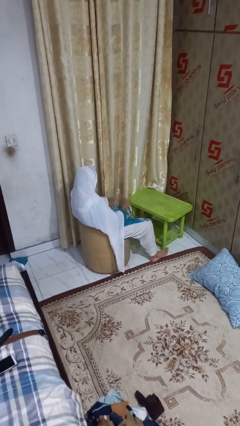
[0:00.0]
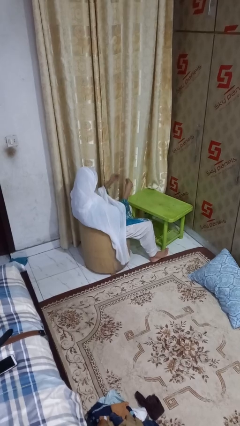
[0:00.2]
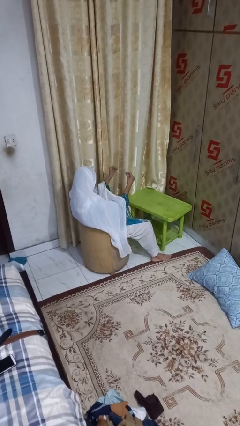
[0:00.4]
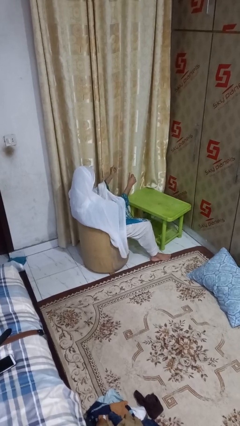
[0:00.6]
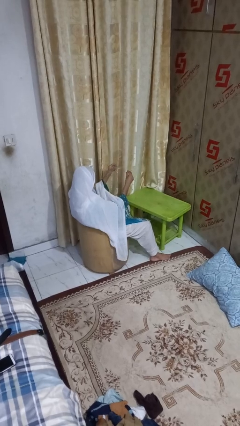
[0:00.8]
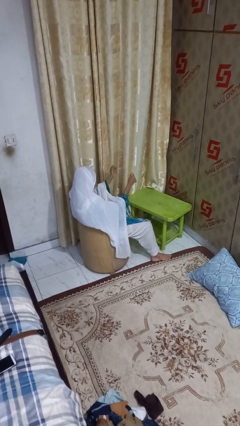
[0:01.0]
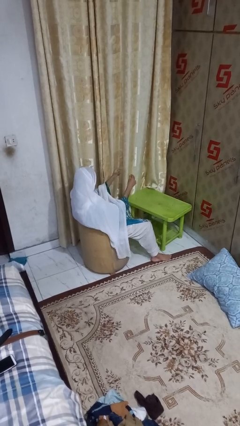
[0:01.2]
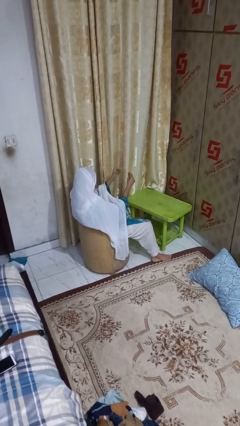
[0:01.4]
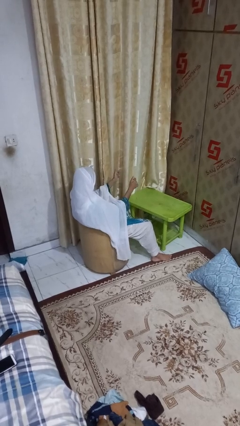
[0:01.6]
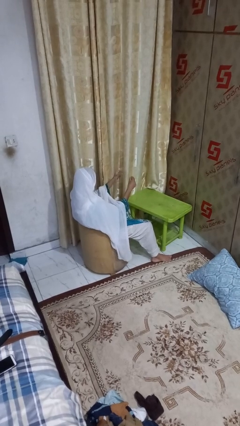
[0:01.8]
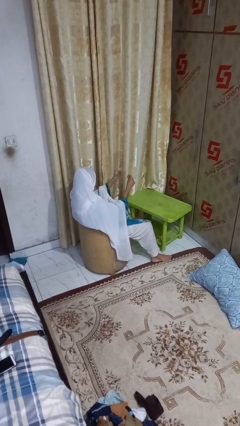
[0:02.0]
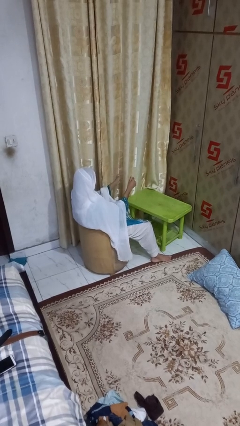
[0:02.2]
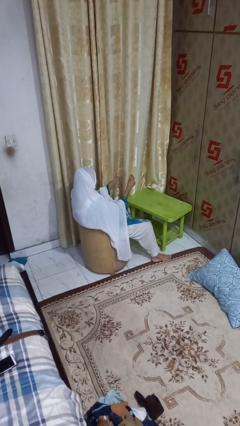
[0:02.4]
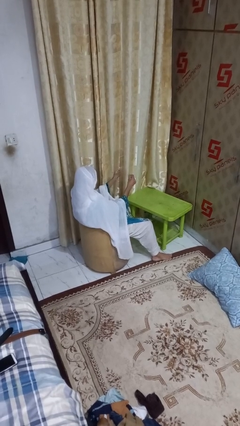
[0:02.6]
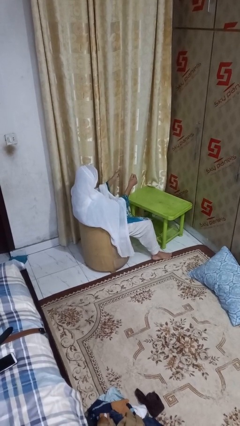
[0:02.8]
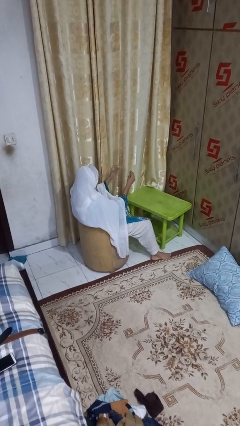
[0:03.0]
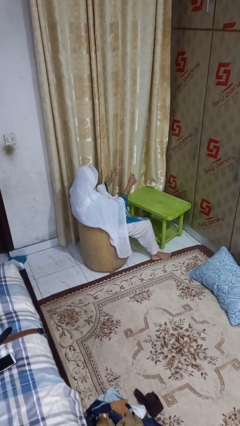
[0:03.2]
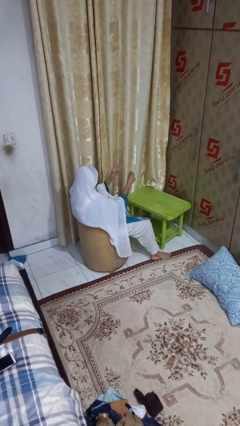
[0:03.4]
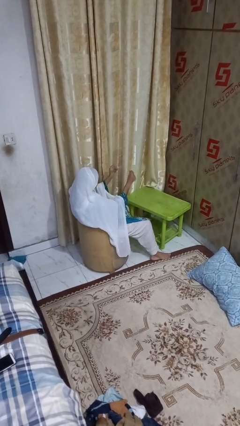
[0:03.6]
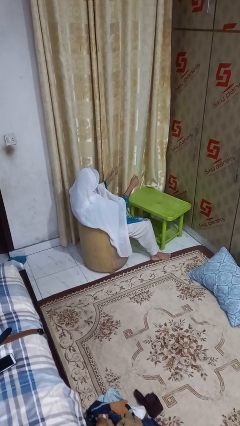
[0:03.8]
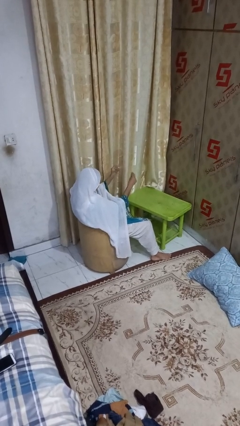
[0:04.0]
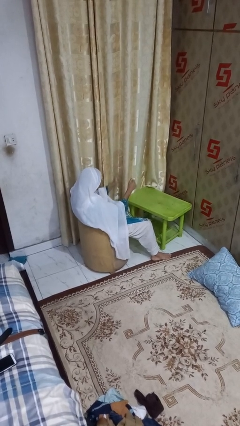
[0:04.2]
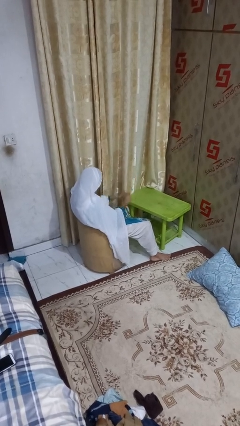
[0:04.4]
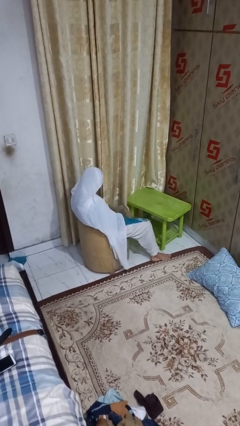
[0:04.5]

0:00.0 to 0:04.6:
person snaps fingers

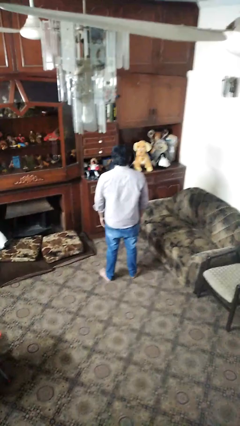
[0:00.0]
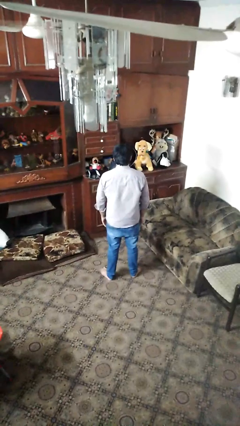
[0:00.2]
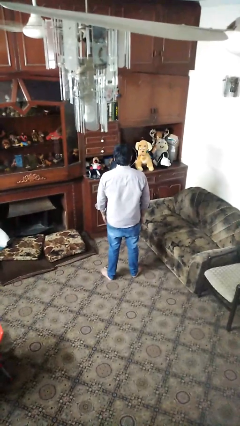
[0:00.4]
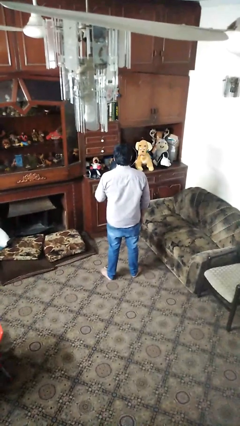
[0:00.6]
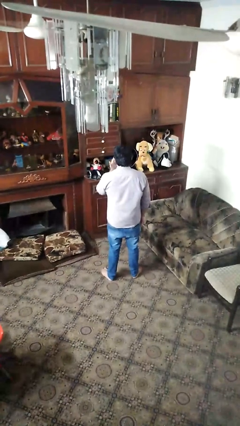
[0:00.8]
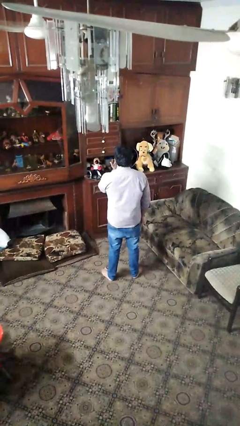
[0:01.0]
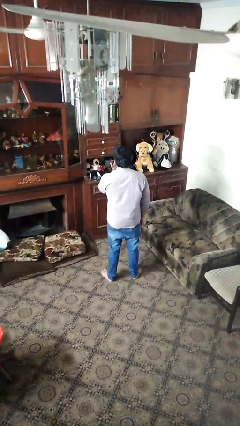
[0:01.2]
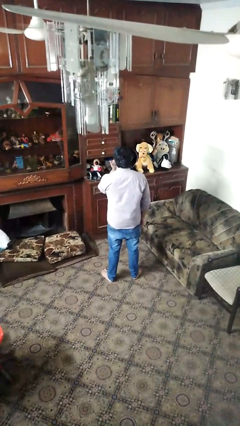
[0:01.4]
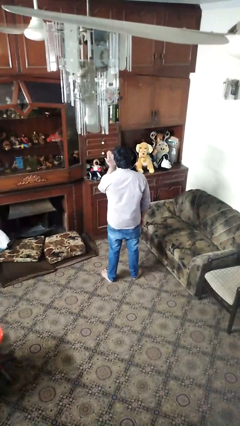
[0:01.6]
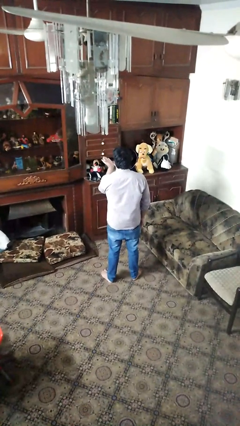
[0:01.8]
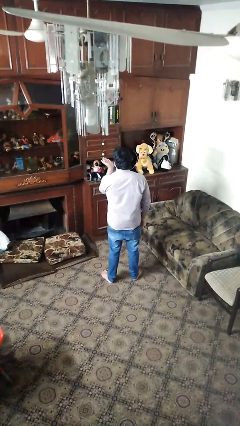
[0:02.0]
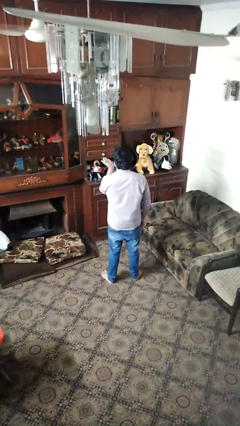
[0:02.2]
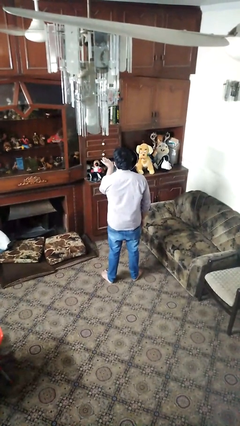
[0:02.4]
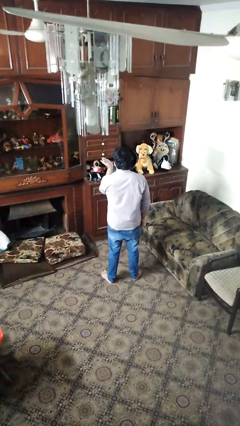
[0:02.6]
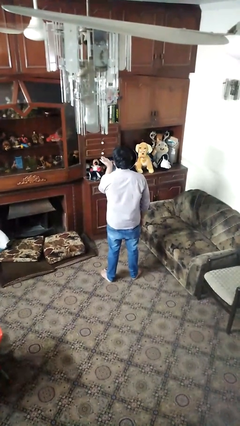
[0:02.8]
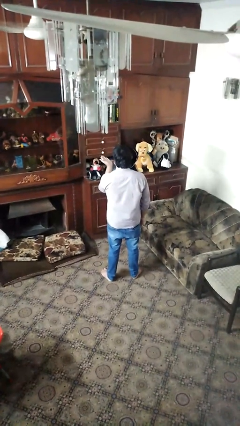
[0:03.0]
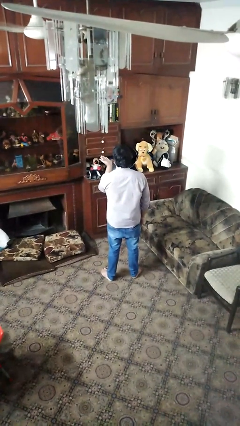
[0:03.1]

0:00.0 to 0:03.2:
person gestures blow kiss

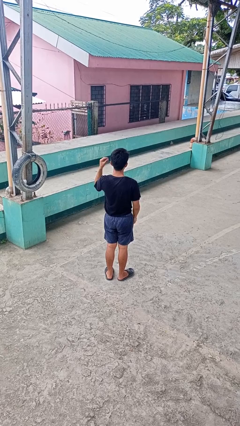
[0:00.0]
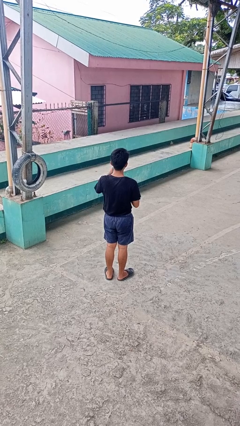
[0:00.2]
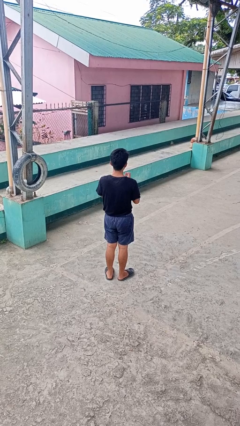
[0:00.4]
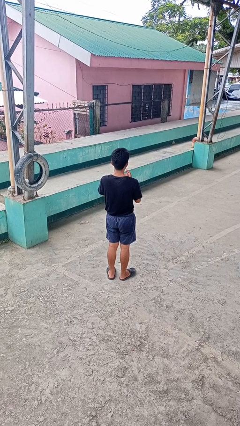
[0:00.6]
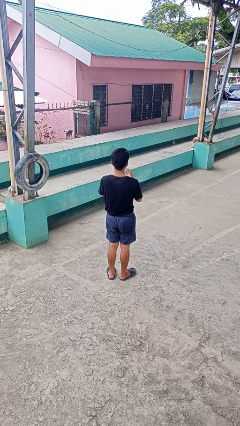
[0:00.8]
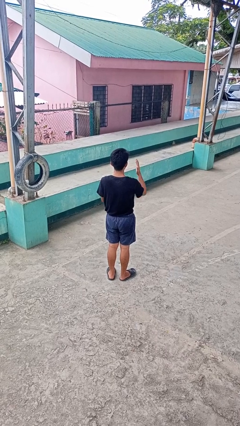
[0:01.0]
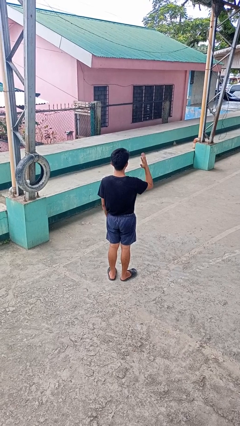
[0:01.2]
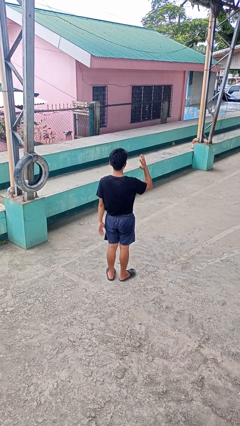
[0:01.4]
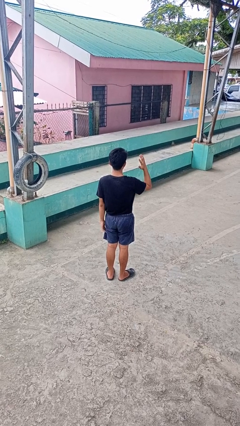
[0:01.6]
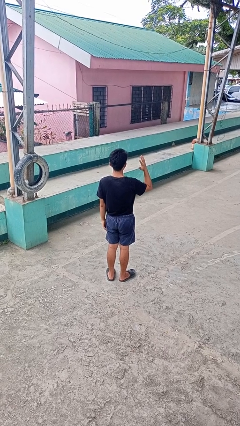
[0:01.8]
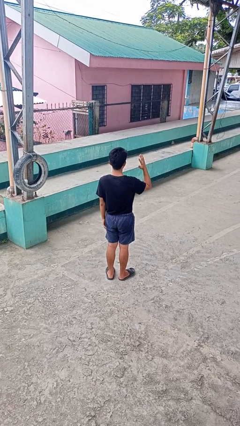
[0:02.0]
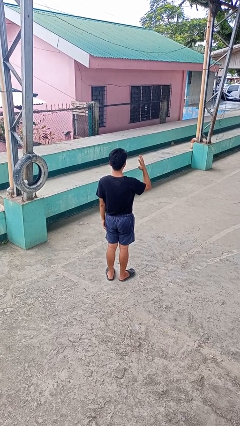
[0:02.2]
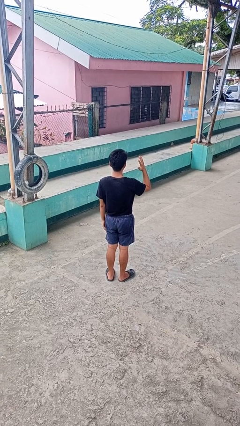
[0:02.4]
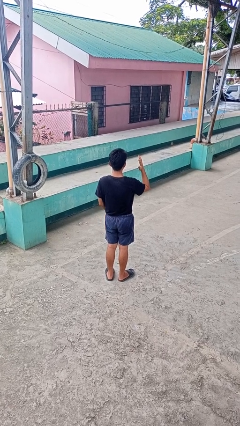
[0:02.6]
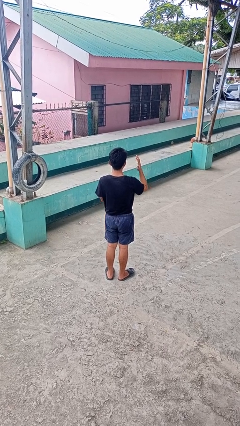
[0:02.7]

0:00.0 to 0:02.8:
person puts on ring

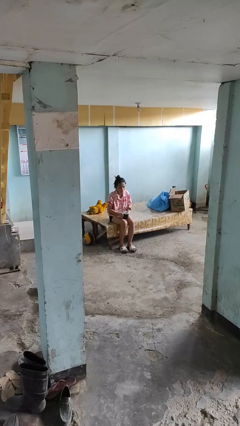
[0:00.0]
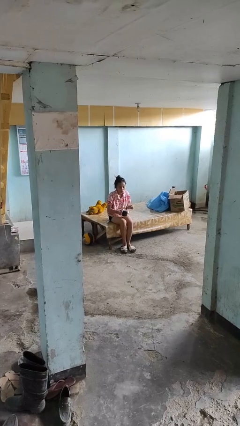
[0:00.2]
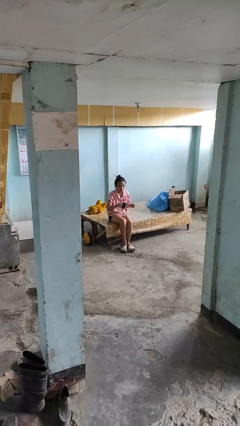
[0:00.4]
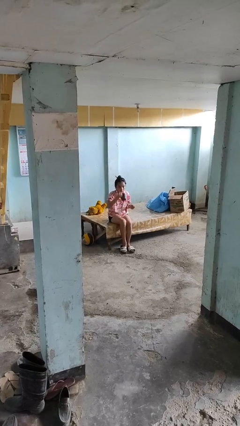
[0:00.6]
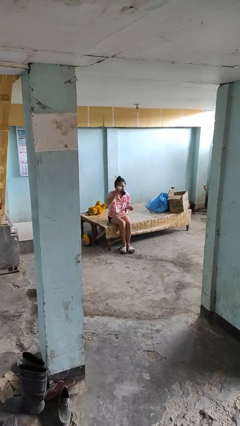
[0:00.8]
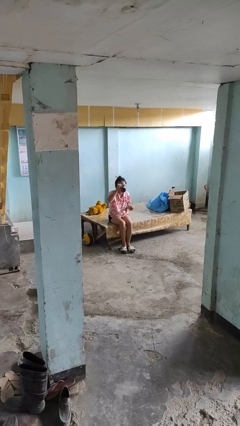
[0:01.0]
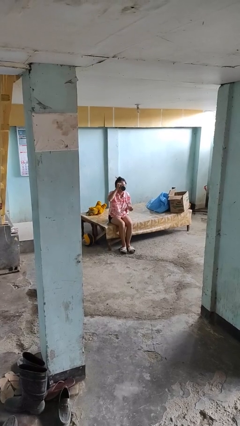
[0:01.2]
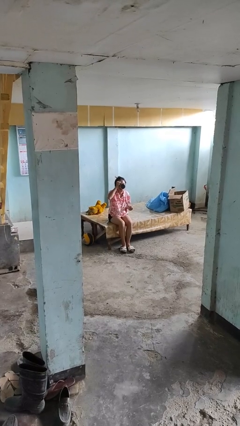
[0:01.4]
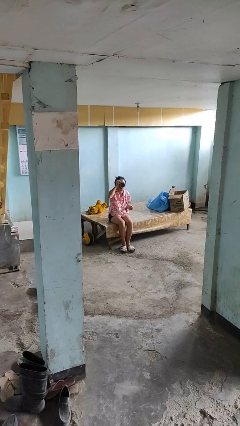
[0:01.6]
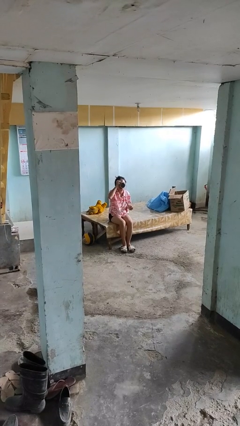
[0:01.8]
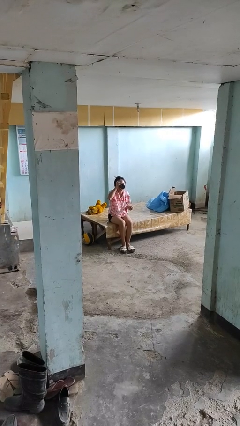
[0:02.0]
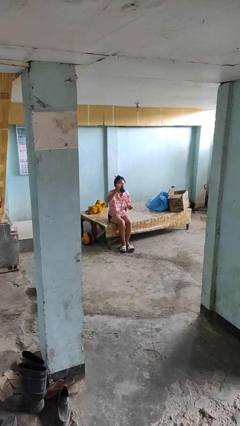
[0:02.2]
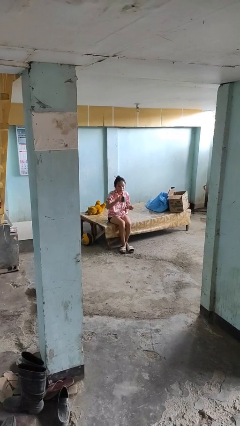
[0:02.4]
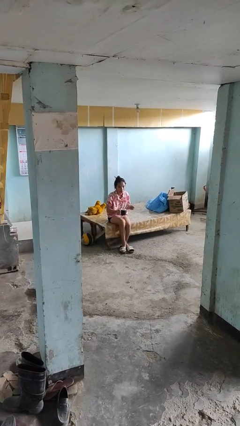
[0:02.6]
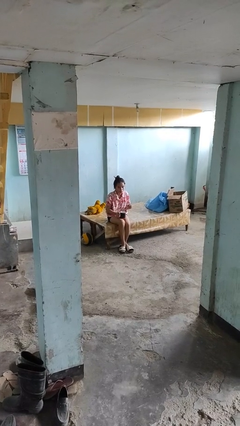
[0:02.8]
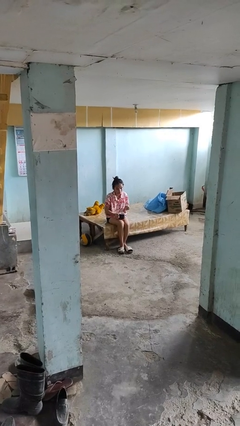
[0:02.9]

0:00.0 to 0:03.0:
person drinks from mug

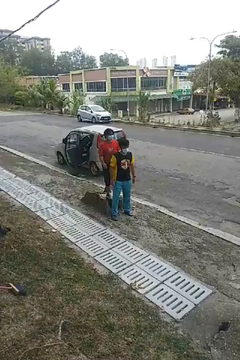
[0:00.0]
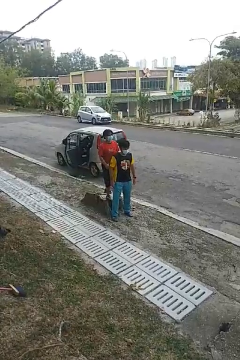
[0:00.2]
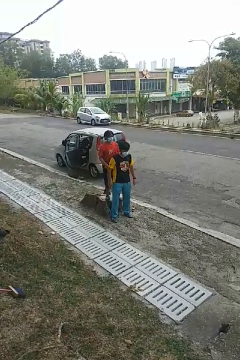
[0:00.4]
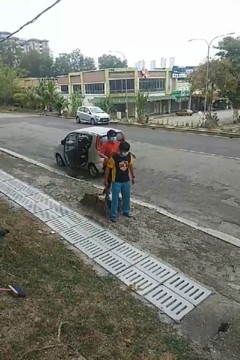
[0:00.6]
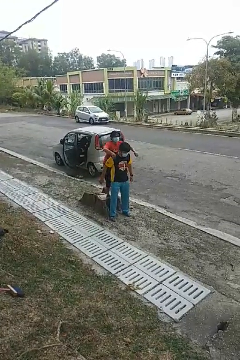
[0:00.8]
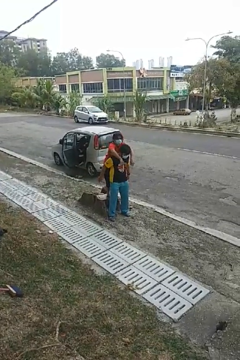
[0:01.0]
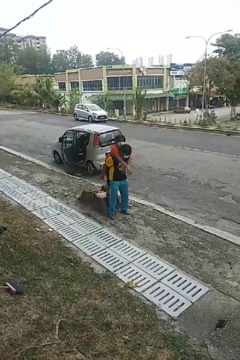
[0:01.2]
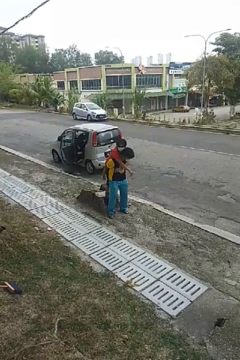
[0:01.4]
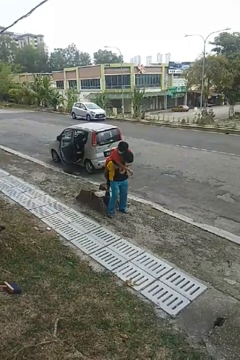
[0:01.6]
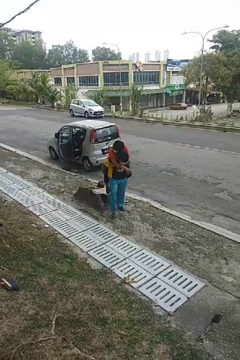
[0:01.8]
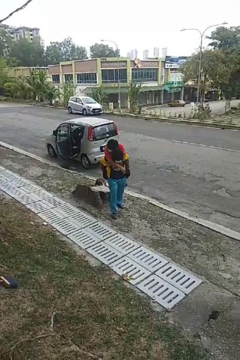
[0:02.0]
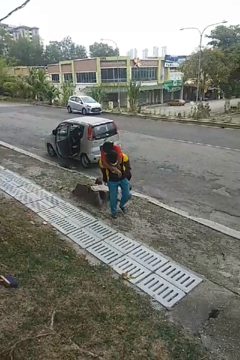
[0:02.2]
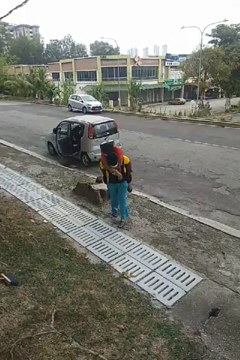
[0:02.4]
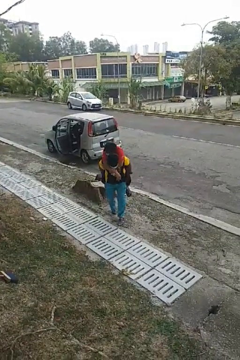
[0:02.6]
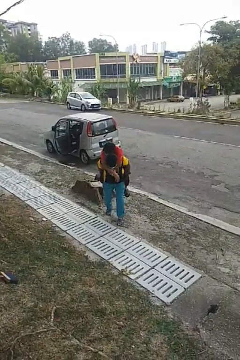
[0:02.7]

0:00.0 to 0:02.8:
person carries person over shoulder

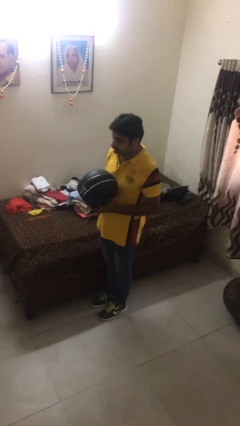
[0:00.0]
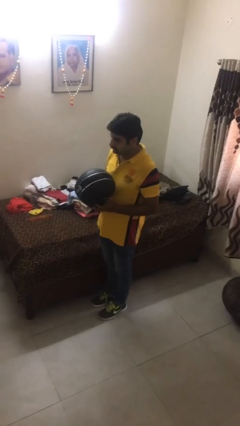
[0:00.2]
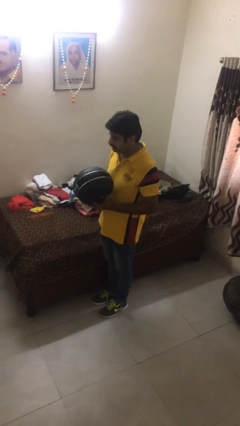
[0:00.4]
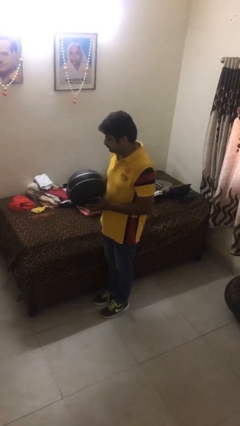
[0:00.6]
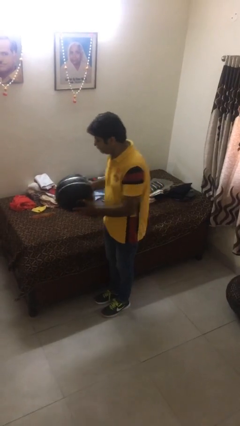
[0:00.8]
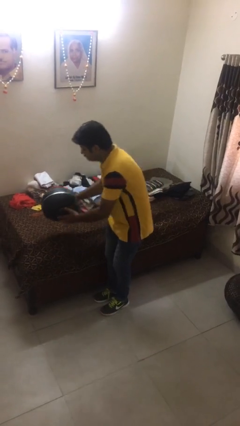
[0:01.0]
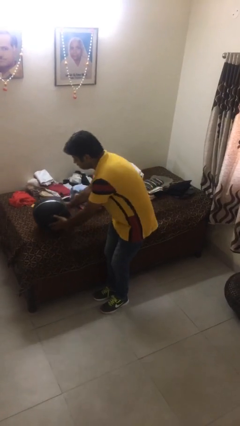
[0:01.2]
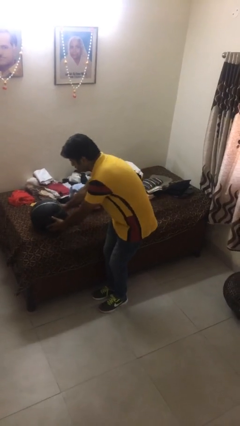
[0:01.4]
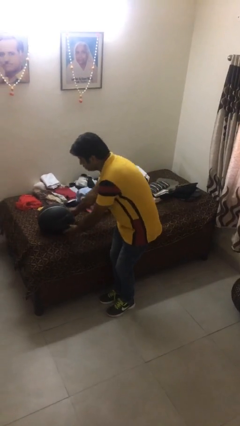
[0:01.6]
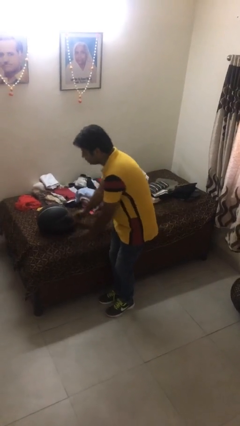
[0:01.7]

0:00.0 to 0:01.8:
person puts down object on bed
